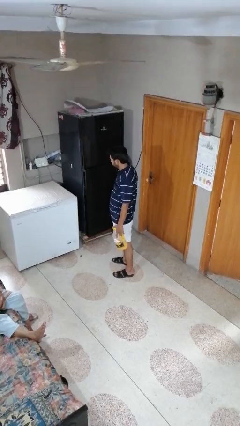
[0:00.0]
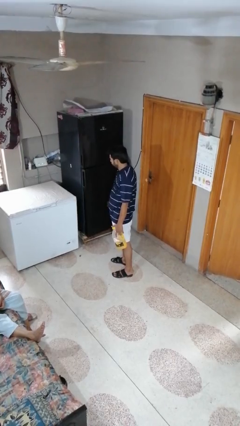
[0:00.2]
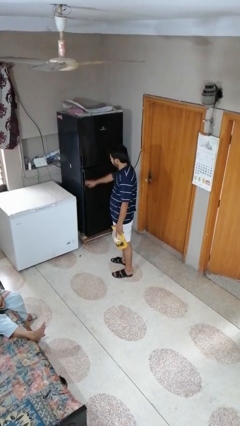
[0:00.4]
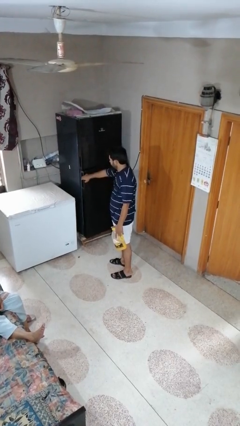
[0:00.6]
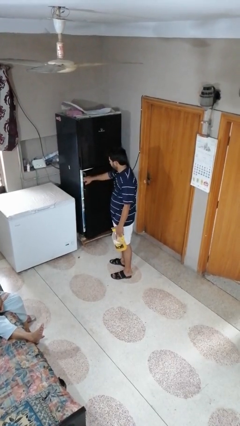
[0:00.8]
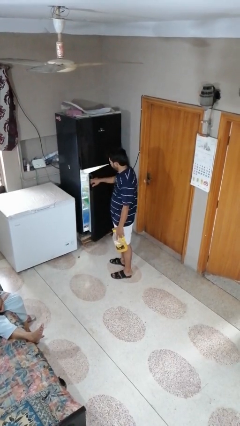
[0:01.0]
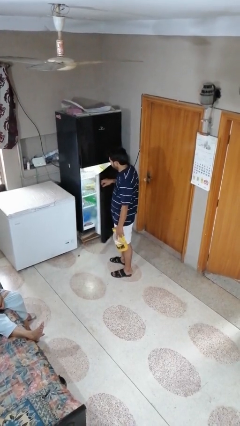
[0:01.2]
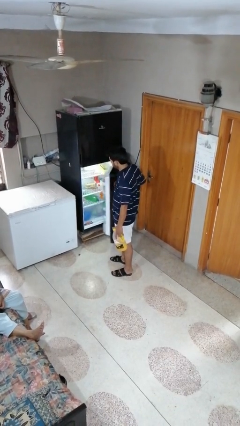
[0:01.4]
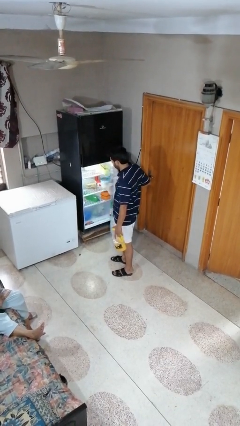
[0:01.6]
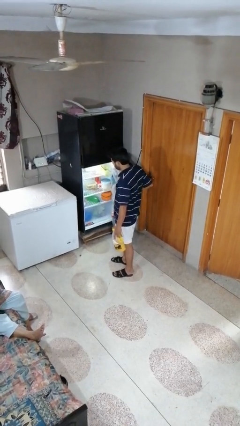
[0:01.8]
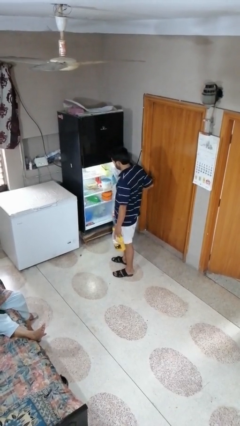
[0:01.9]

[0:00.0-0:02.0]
person opens refrigerator

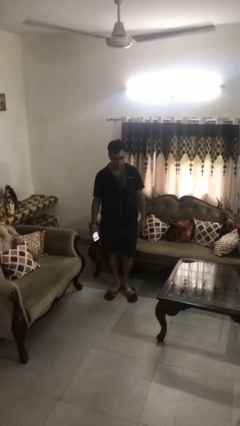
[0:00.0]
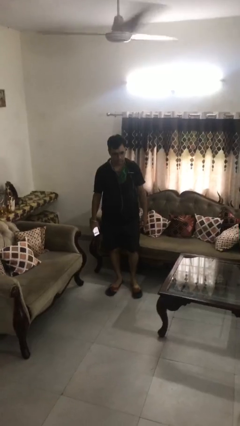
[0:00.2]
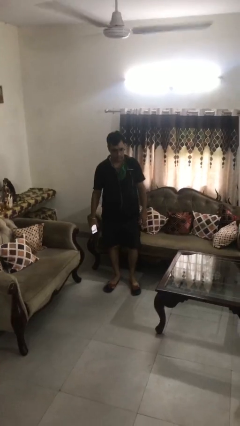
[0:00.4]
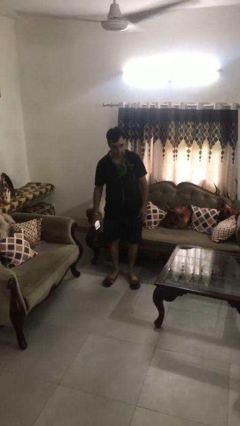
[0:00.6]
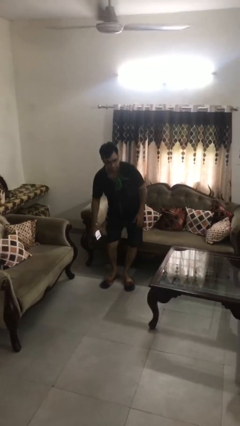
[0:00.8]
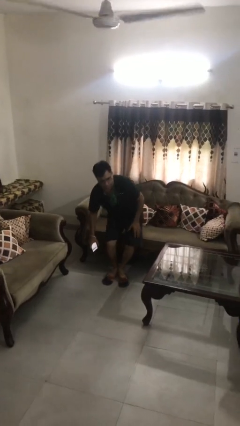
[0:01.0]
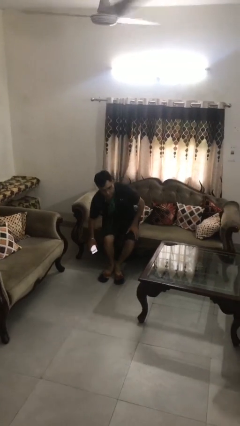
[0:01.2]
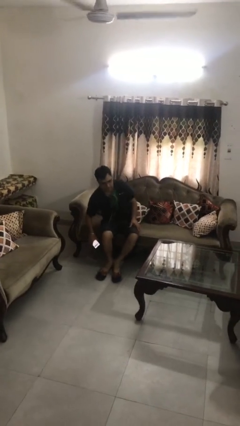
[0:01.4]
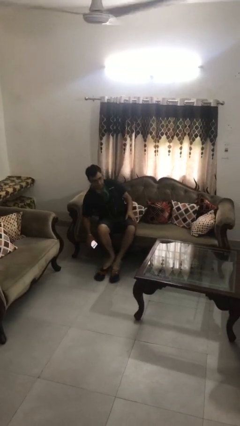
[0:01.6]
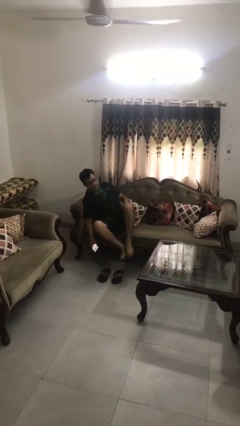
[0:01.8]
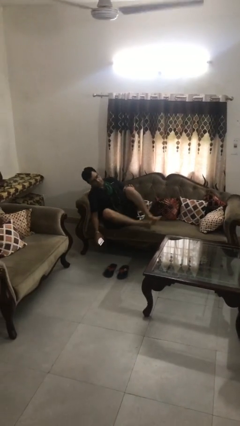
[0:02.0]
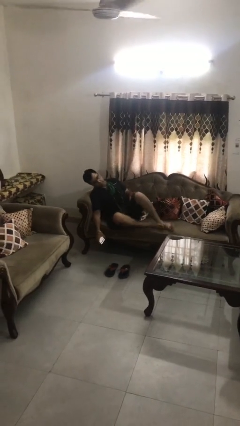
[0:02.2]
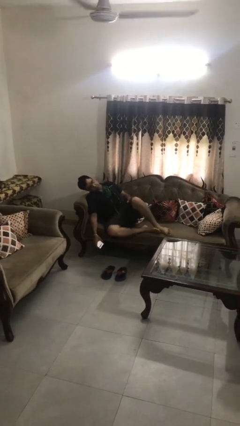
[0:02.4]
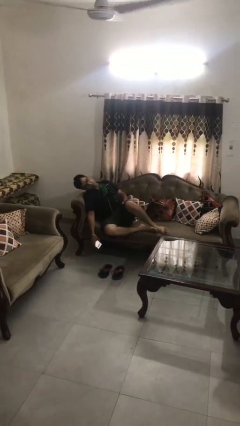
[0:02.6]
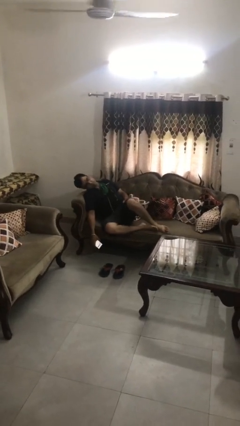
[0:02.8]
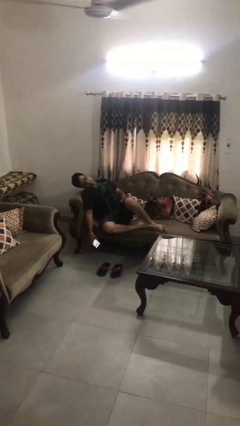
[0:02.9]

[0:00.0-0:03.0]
person lies down on couch

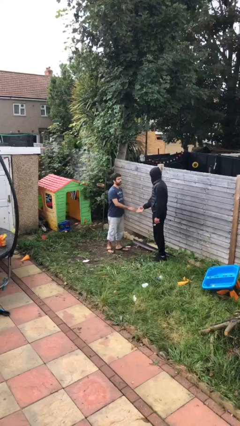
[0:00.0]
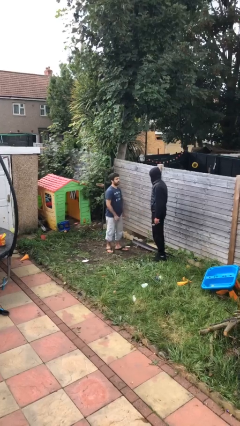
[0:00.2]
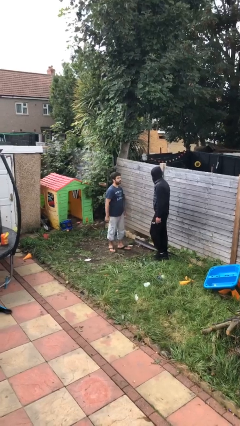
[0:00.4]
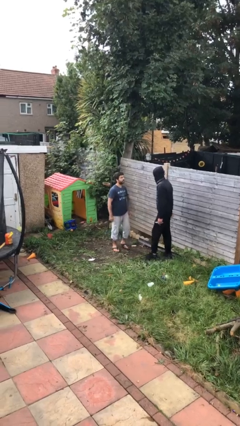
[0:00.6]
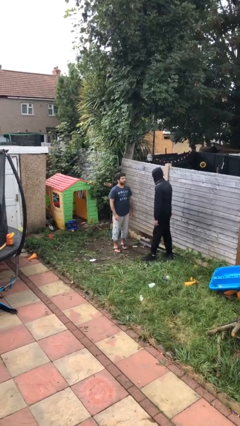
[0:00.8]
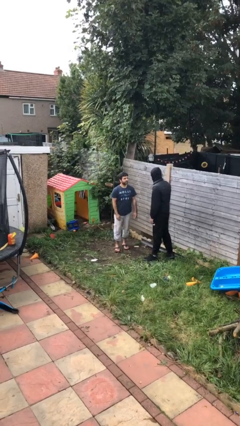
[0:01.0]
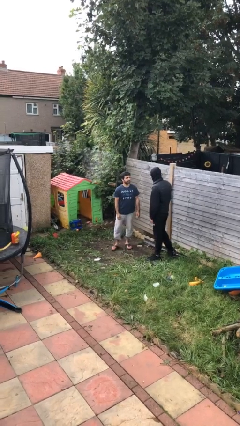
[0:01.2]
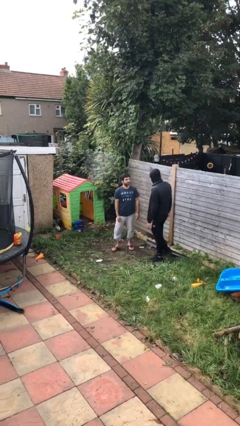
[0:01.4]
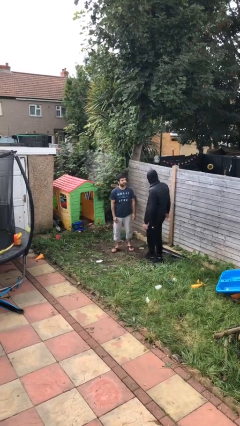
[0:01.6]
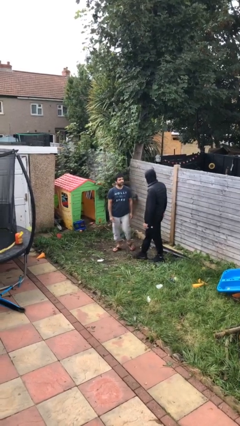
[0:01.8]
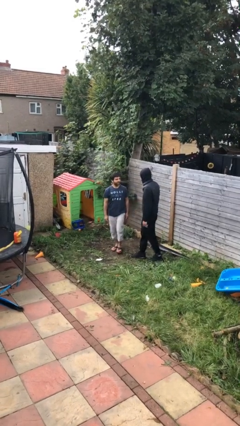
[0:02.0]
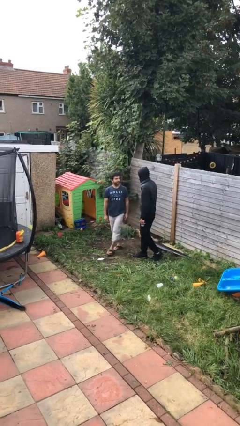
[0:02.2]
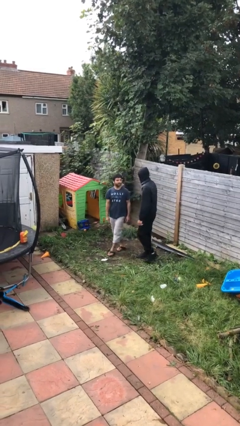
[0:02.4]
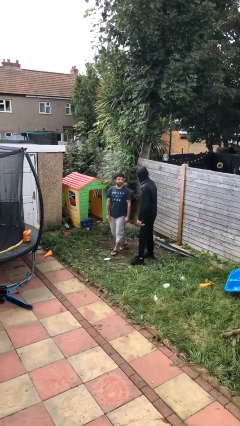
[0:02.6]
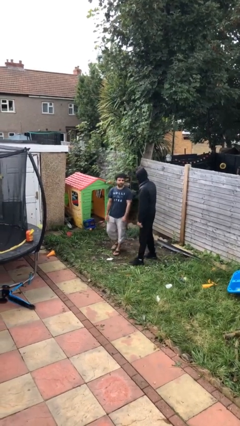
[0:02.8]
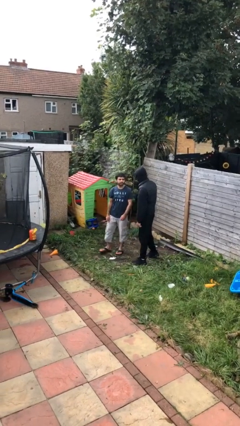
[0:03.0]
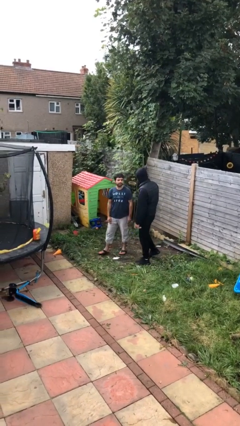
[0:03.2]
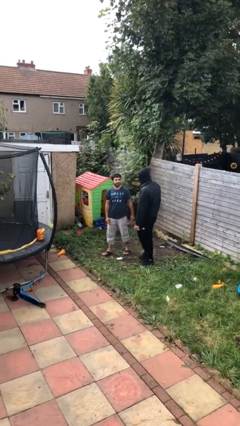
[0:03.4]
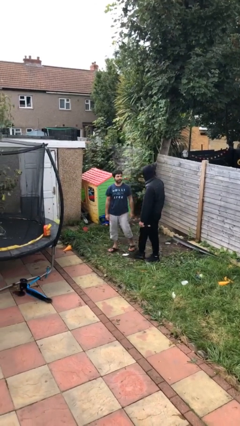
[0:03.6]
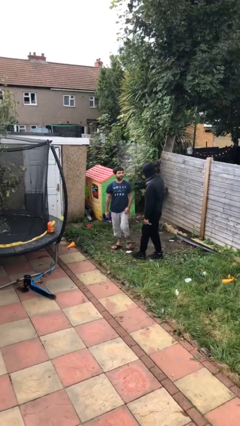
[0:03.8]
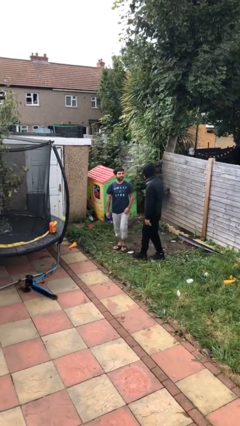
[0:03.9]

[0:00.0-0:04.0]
person talks to person

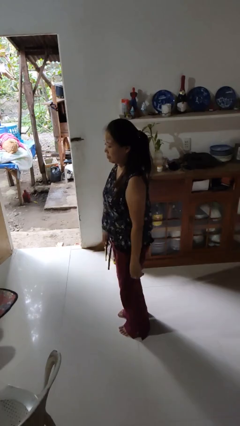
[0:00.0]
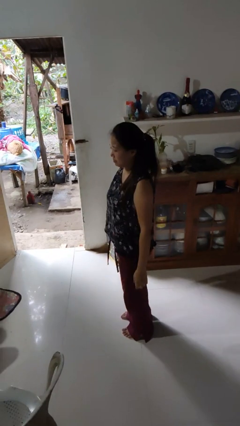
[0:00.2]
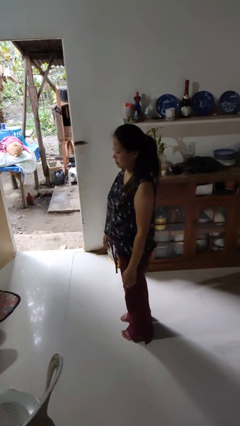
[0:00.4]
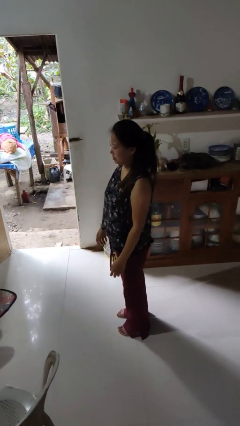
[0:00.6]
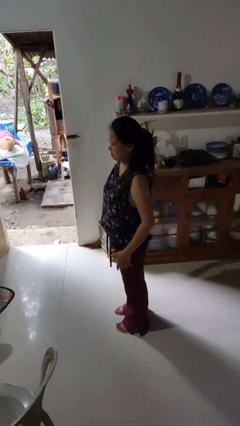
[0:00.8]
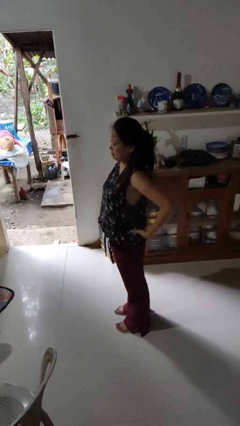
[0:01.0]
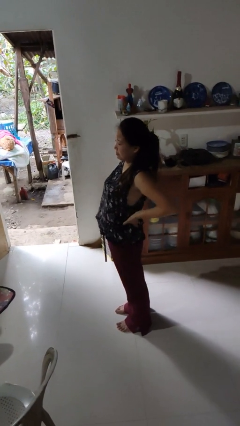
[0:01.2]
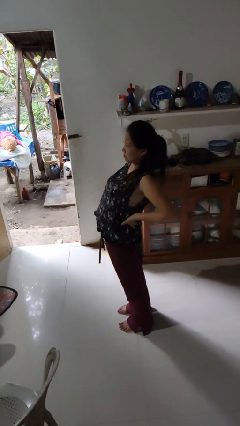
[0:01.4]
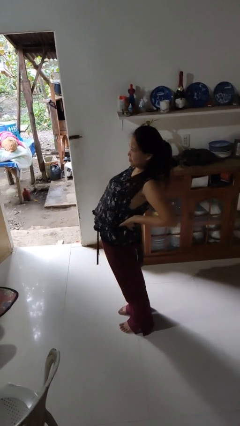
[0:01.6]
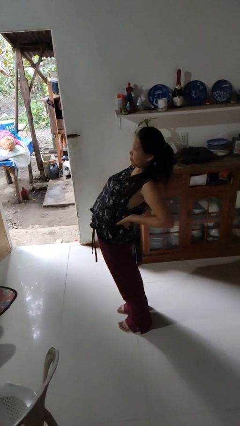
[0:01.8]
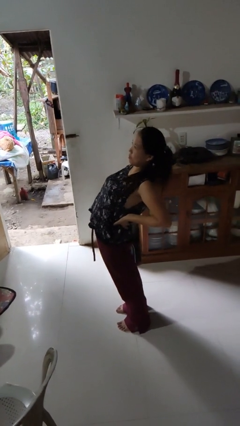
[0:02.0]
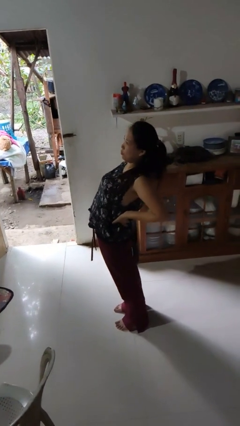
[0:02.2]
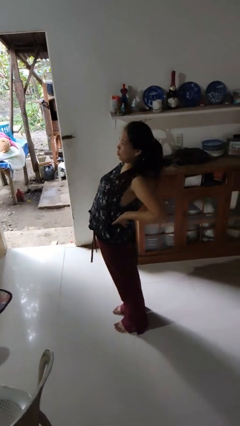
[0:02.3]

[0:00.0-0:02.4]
person stretches back

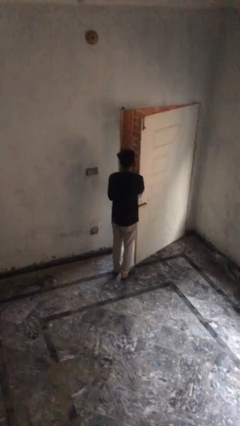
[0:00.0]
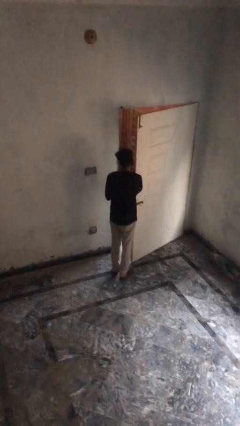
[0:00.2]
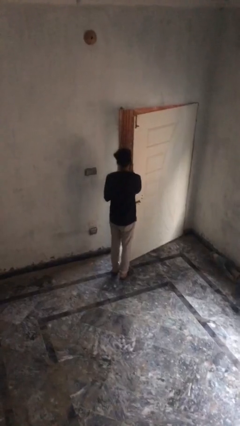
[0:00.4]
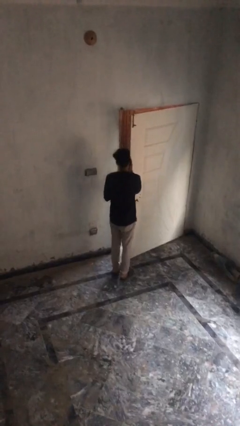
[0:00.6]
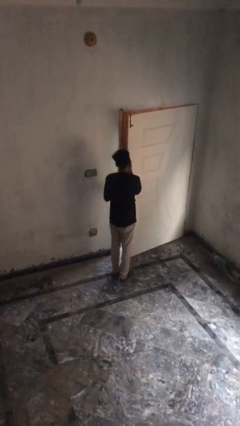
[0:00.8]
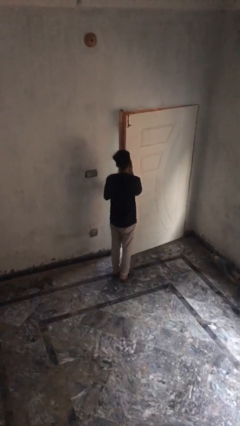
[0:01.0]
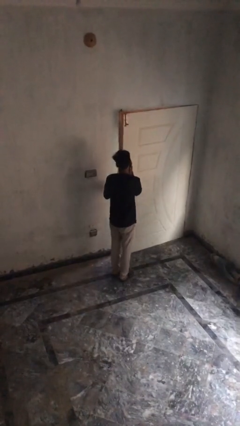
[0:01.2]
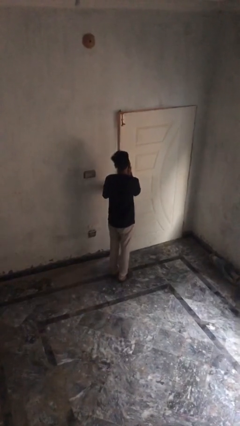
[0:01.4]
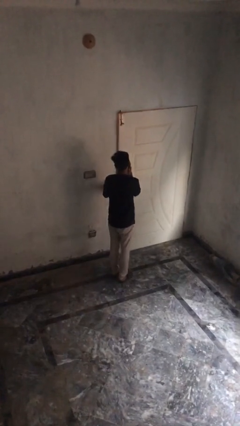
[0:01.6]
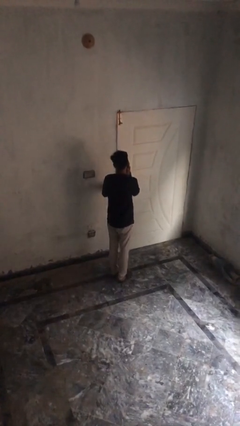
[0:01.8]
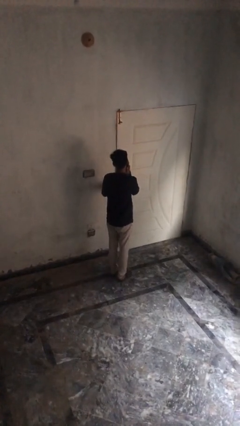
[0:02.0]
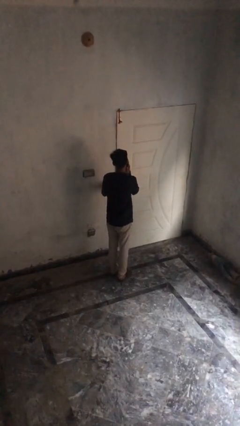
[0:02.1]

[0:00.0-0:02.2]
person closes facility door

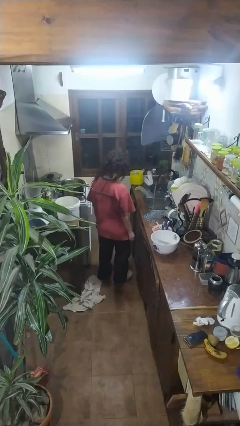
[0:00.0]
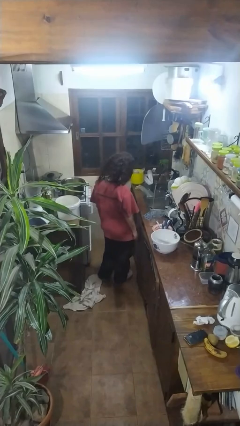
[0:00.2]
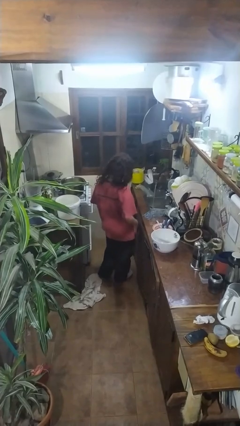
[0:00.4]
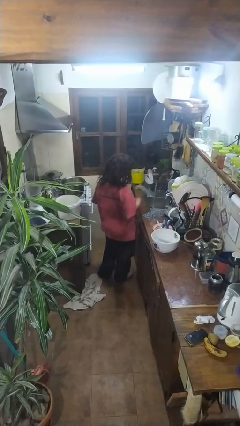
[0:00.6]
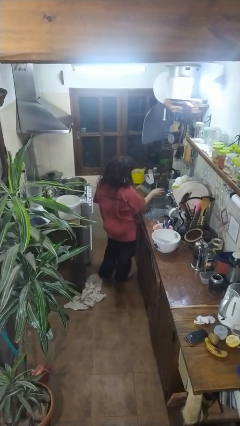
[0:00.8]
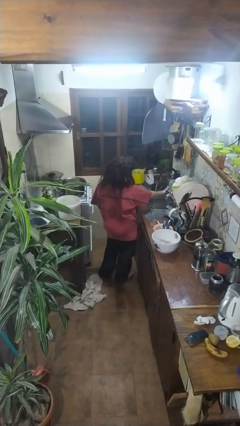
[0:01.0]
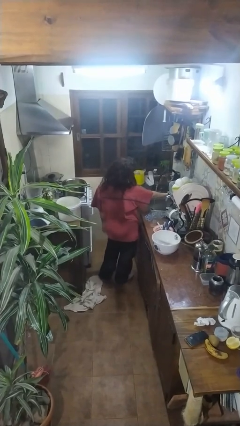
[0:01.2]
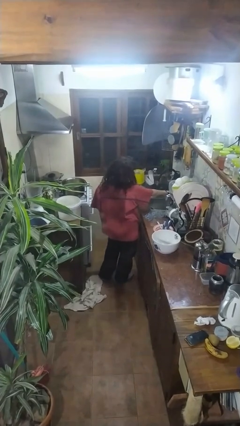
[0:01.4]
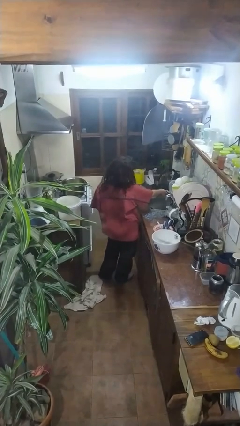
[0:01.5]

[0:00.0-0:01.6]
person turns off faucet

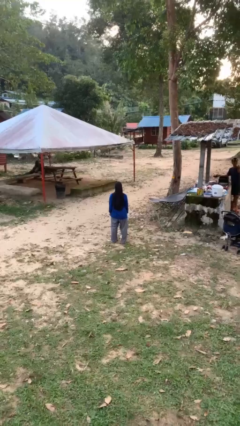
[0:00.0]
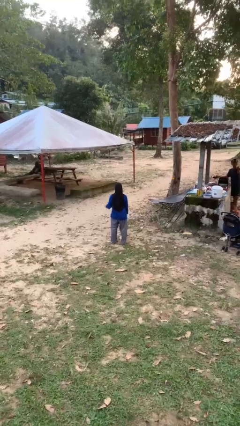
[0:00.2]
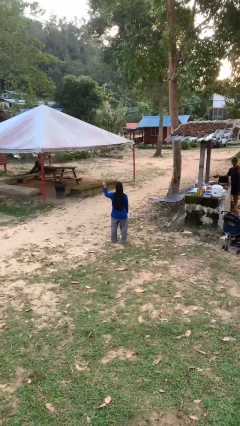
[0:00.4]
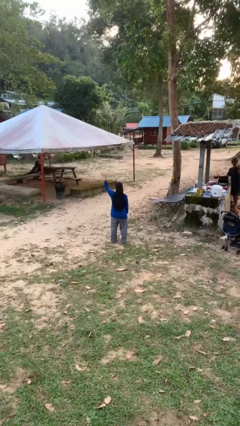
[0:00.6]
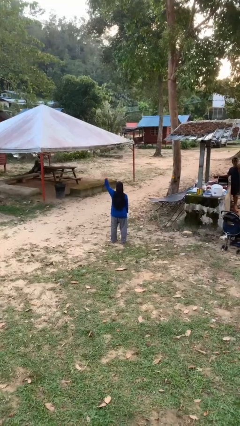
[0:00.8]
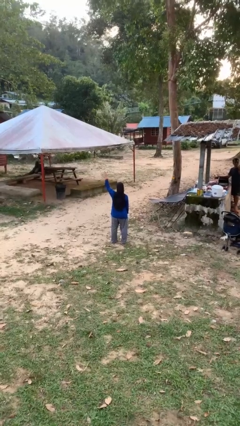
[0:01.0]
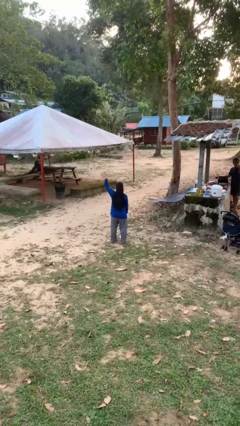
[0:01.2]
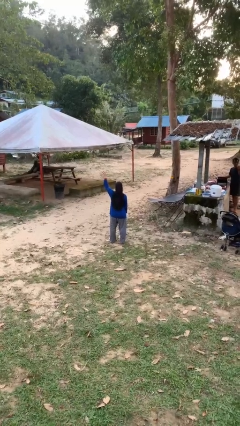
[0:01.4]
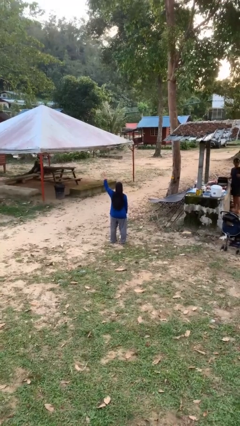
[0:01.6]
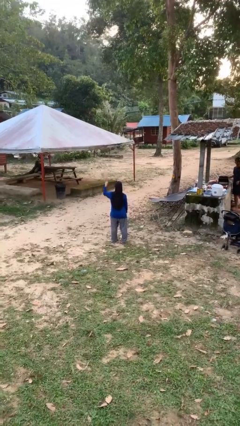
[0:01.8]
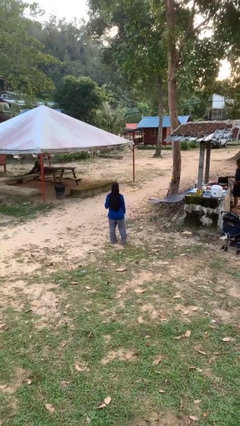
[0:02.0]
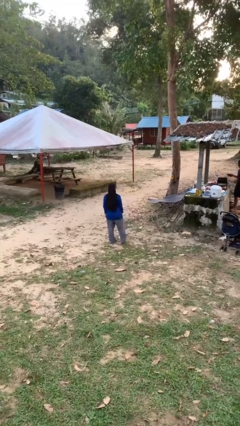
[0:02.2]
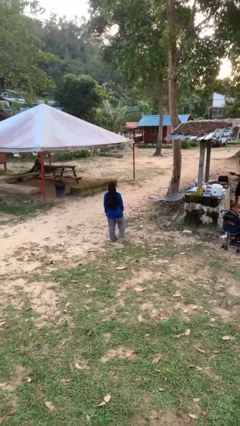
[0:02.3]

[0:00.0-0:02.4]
person gestures number four
